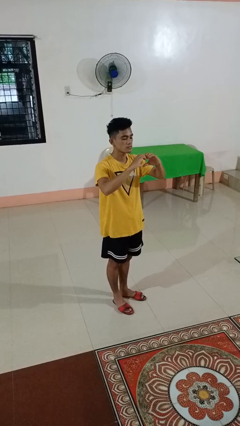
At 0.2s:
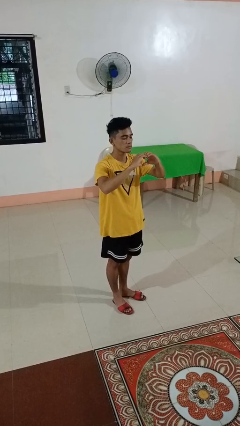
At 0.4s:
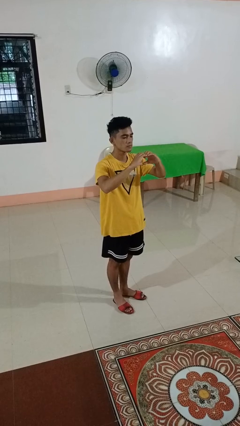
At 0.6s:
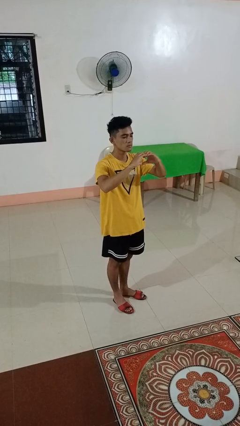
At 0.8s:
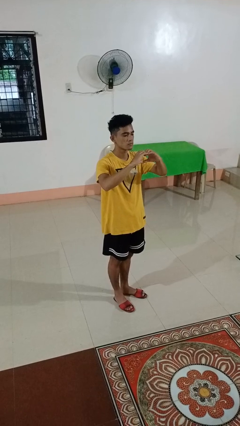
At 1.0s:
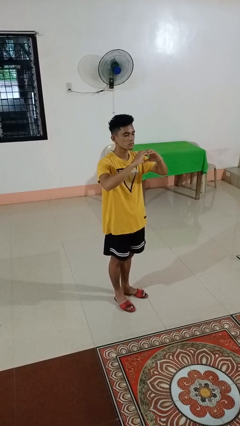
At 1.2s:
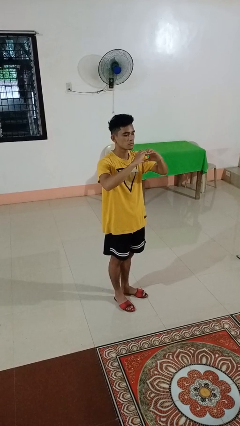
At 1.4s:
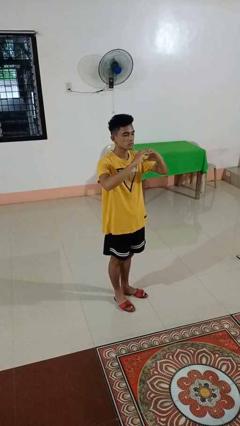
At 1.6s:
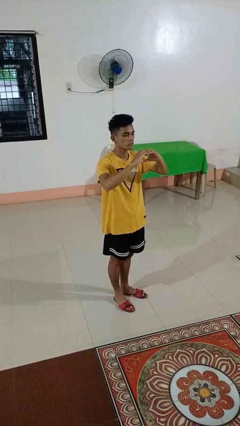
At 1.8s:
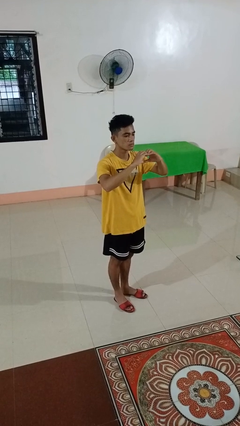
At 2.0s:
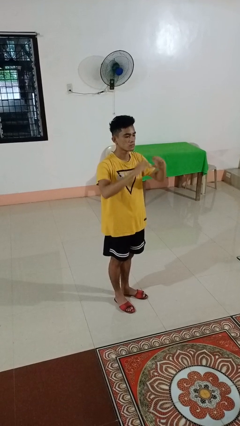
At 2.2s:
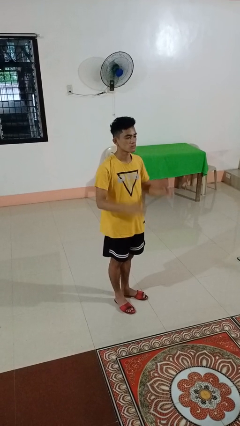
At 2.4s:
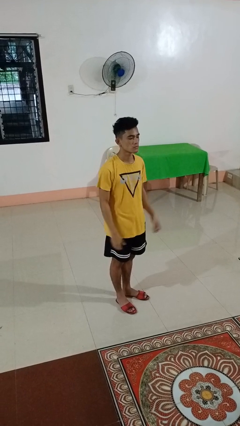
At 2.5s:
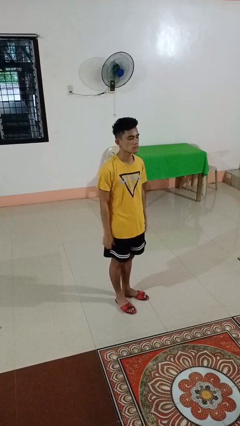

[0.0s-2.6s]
person gestures heart

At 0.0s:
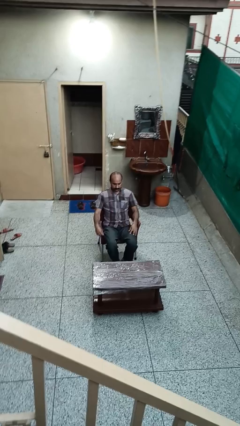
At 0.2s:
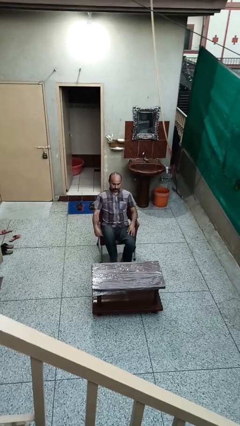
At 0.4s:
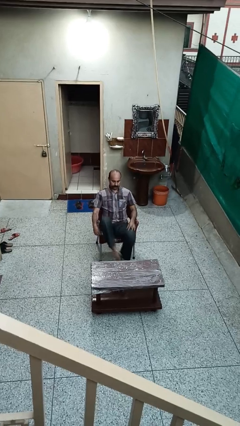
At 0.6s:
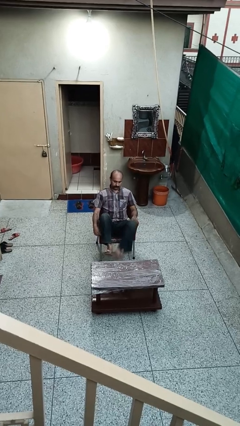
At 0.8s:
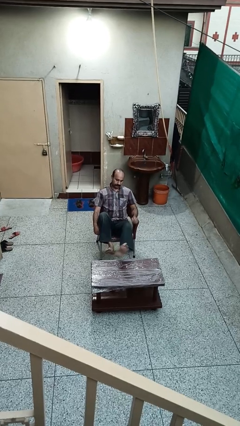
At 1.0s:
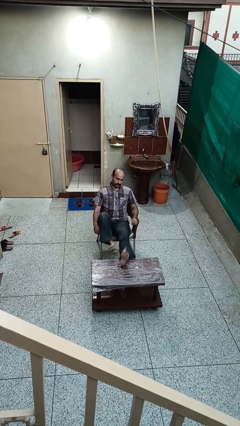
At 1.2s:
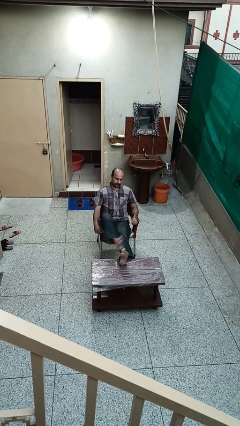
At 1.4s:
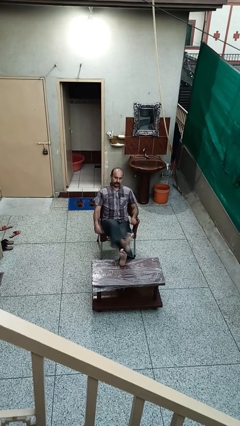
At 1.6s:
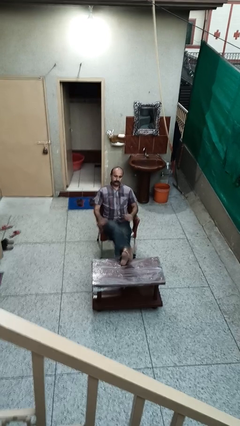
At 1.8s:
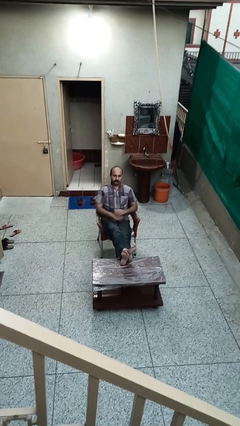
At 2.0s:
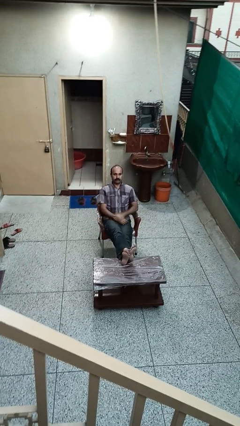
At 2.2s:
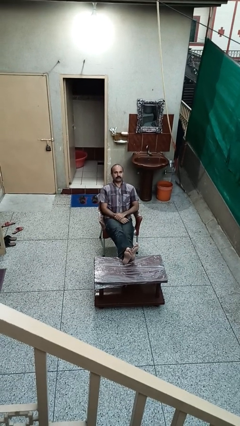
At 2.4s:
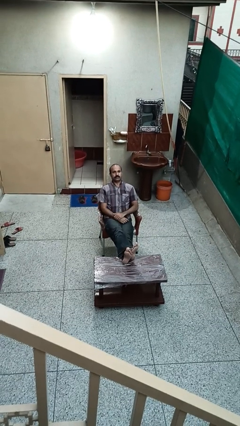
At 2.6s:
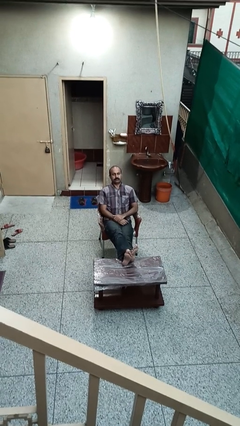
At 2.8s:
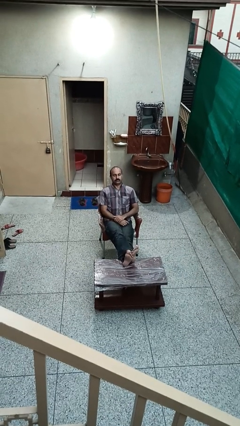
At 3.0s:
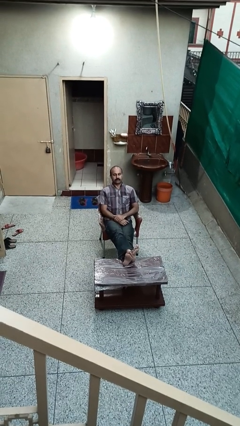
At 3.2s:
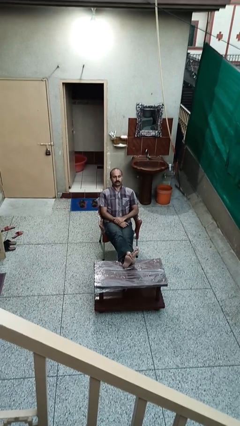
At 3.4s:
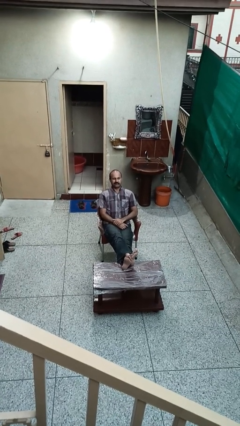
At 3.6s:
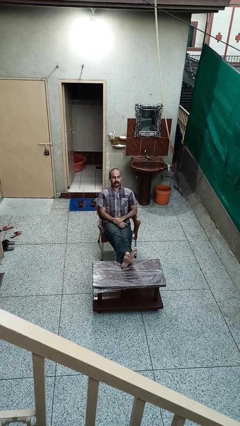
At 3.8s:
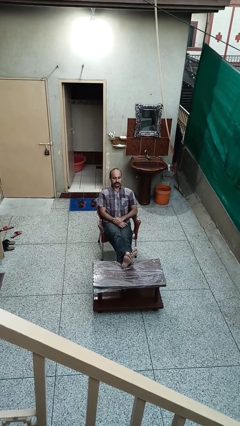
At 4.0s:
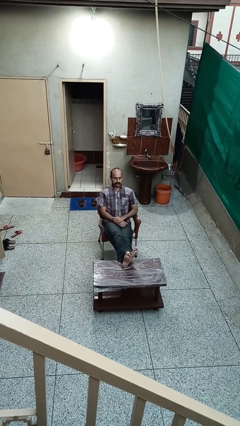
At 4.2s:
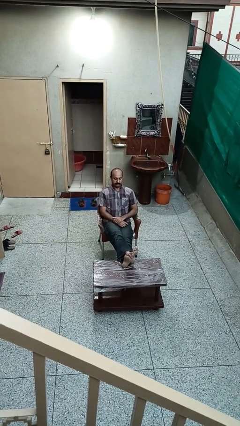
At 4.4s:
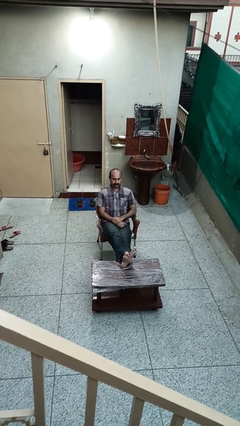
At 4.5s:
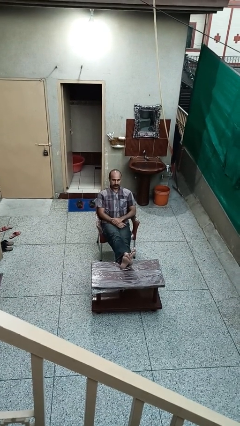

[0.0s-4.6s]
person puts feet up

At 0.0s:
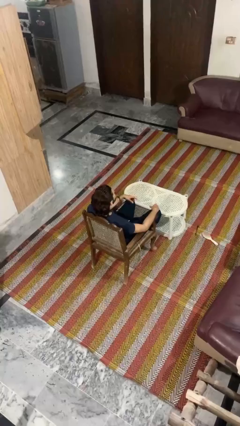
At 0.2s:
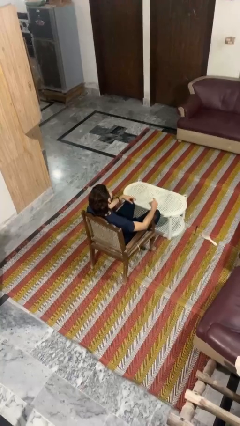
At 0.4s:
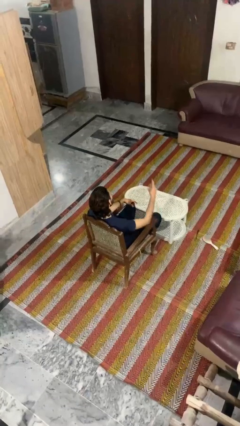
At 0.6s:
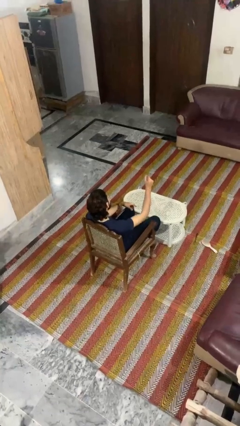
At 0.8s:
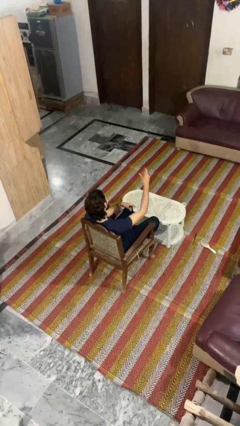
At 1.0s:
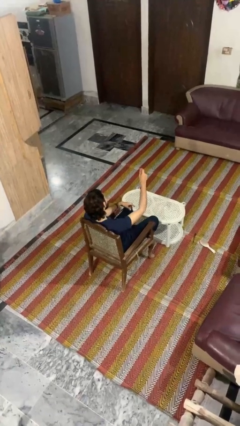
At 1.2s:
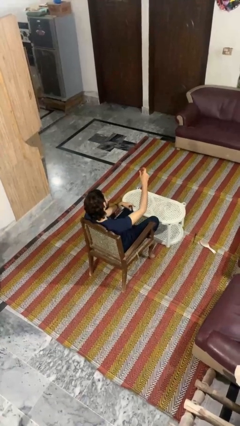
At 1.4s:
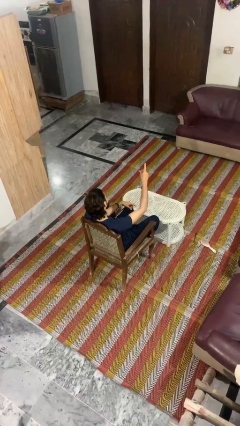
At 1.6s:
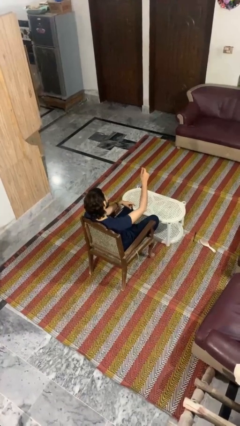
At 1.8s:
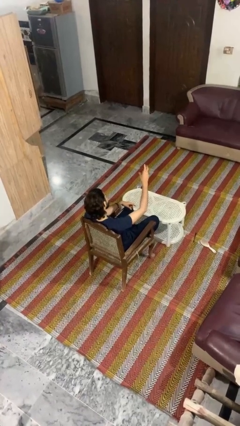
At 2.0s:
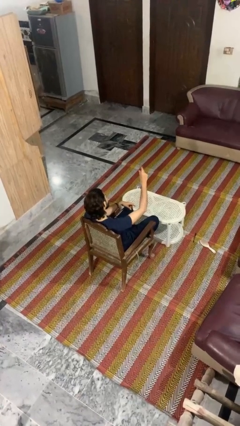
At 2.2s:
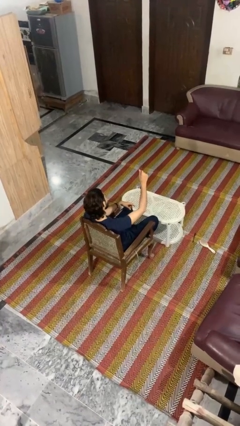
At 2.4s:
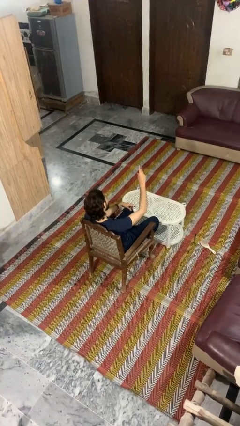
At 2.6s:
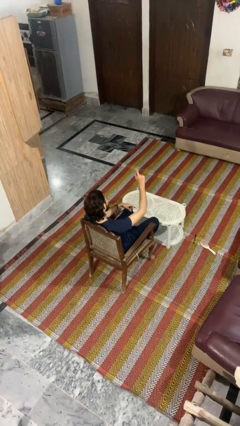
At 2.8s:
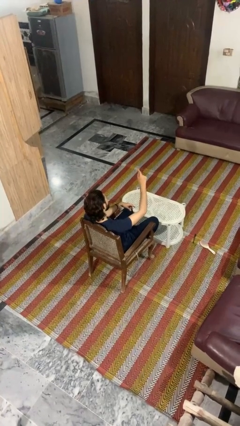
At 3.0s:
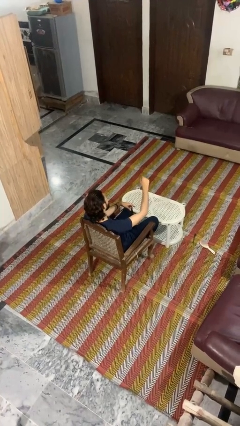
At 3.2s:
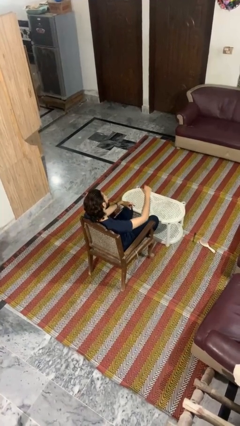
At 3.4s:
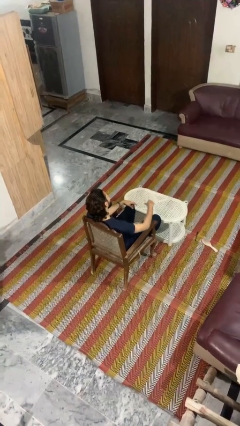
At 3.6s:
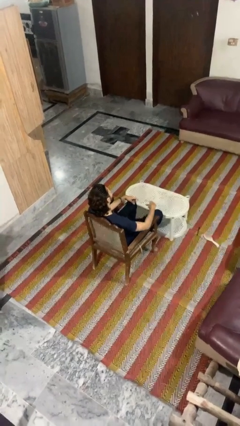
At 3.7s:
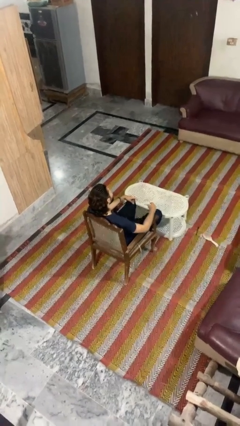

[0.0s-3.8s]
person snaps fingers

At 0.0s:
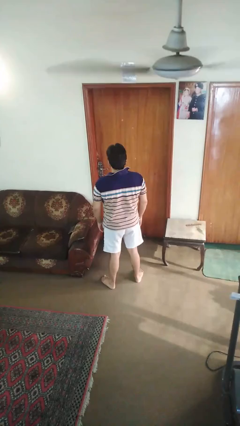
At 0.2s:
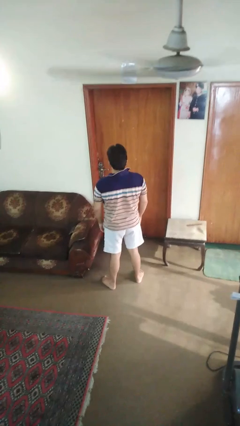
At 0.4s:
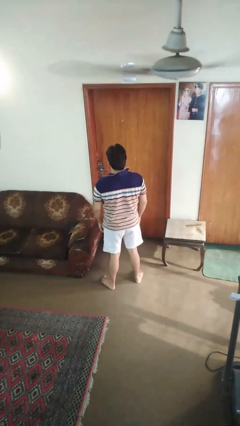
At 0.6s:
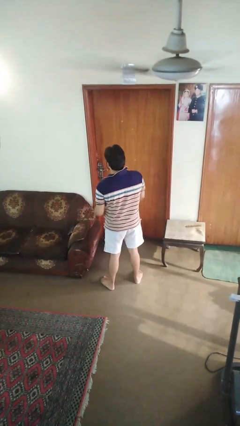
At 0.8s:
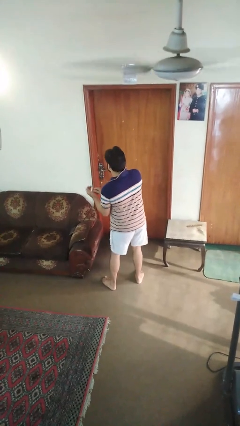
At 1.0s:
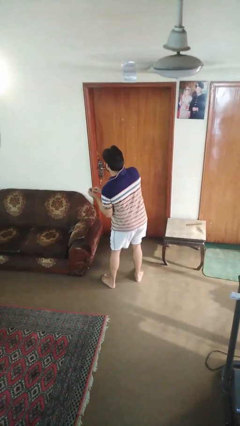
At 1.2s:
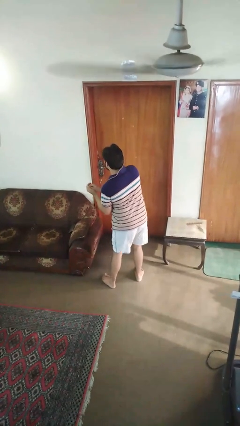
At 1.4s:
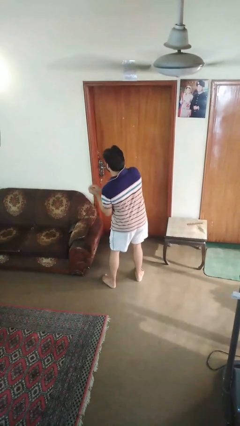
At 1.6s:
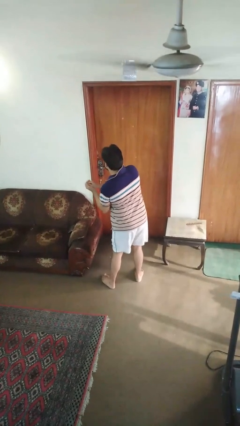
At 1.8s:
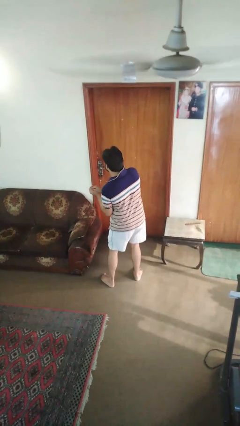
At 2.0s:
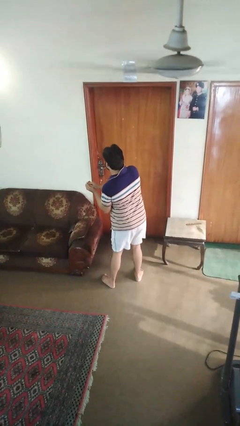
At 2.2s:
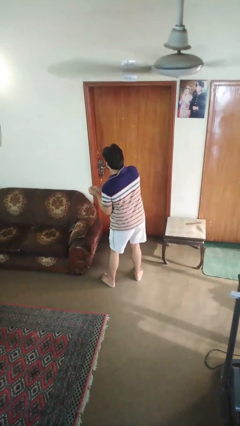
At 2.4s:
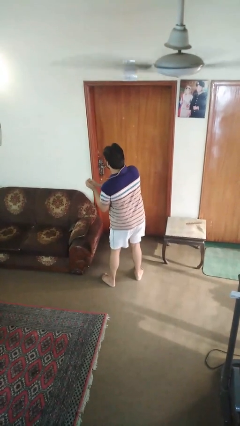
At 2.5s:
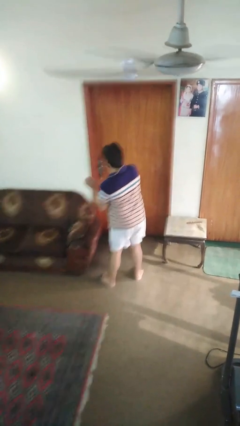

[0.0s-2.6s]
person dances in place

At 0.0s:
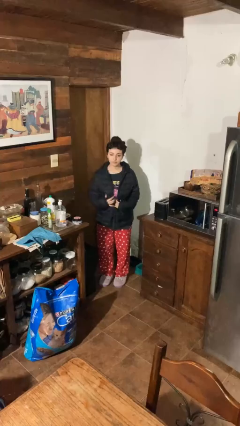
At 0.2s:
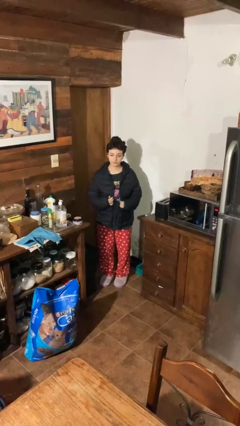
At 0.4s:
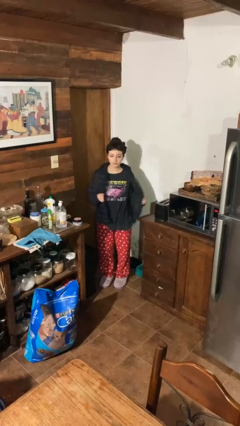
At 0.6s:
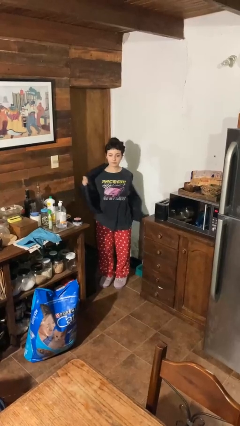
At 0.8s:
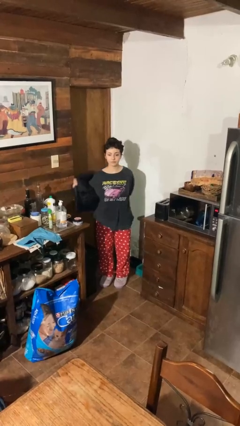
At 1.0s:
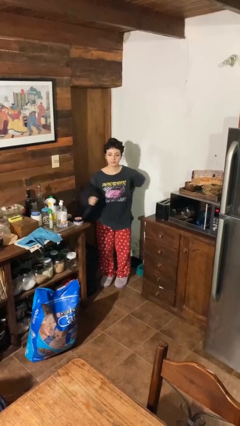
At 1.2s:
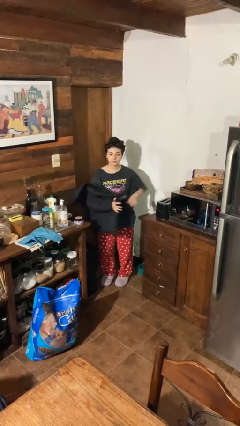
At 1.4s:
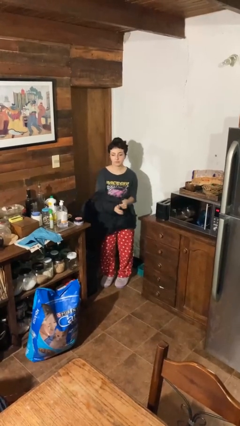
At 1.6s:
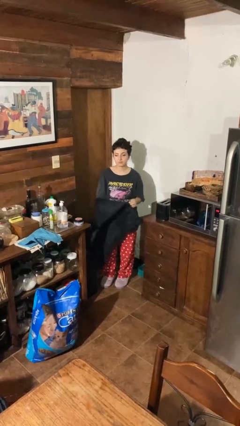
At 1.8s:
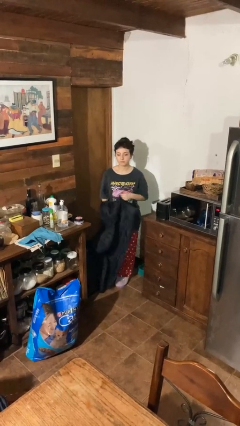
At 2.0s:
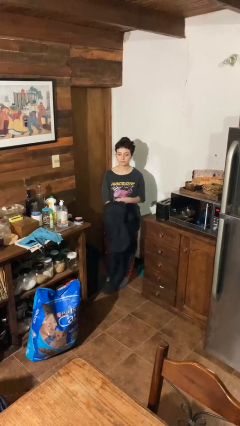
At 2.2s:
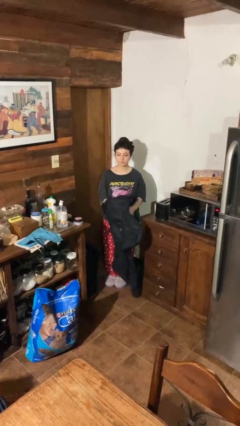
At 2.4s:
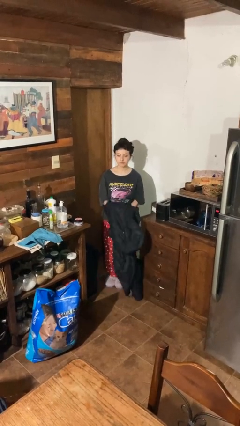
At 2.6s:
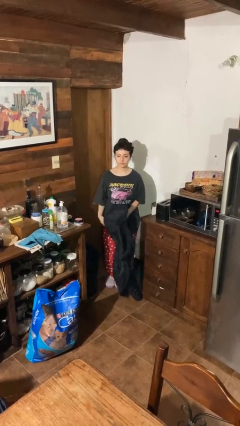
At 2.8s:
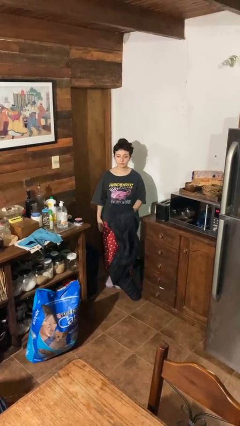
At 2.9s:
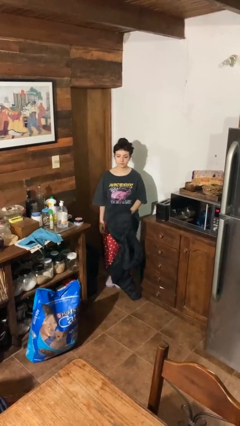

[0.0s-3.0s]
person takes off jacket

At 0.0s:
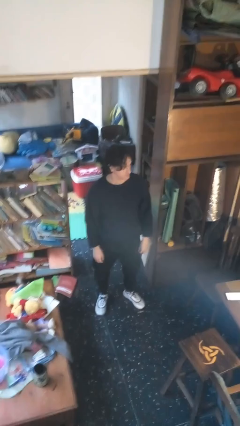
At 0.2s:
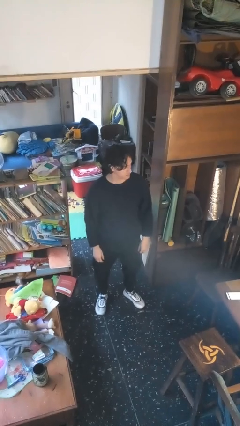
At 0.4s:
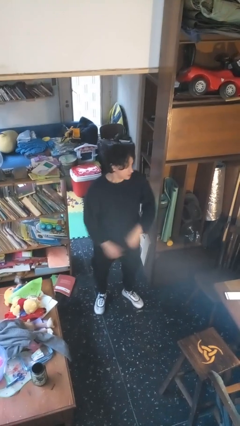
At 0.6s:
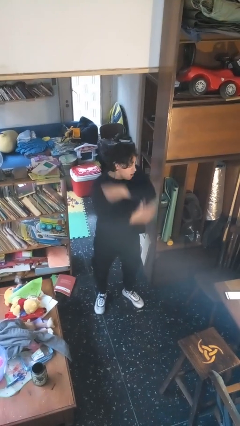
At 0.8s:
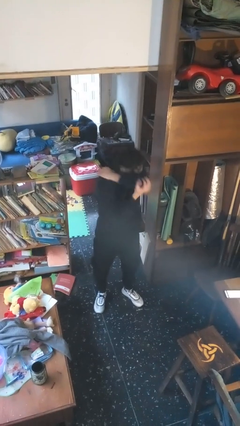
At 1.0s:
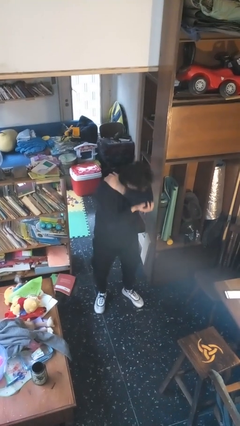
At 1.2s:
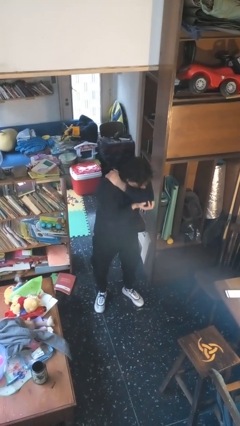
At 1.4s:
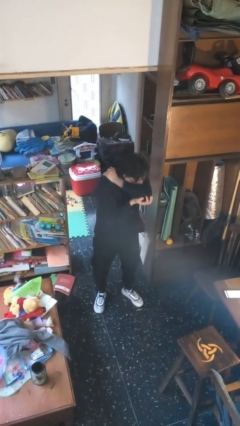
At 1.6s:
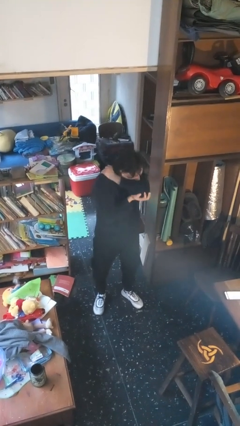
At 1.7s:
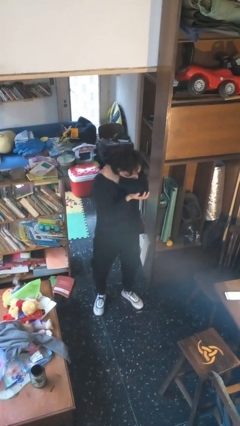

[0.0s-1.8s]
person sneezes into arm
